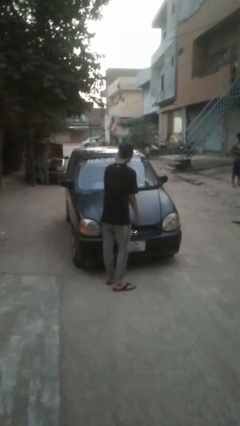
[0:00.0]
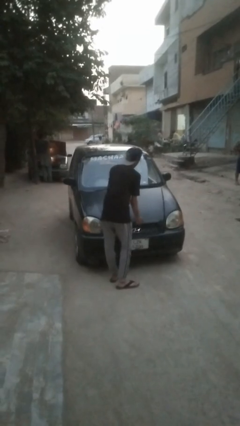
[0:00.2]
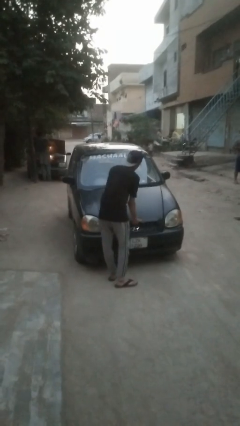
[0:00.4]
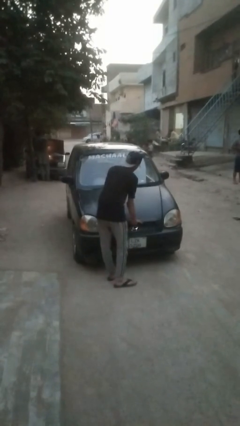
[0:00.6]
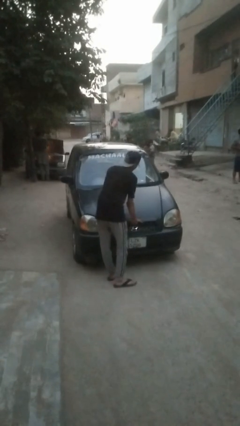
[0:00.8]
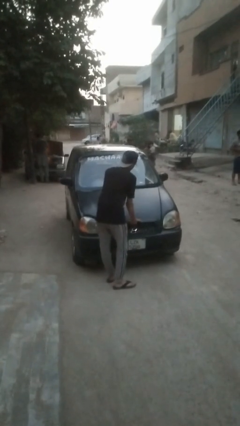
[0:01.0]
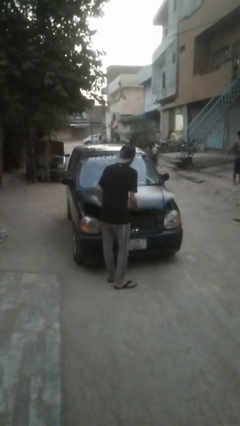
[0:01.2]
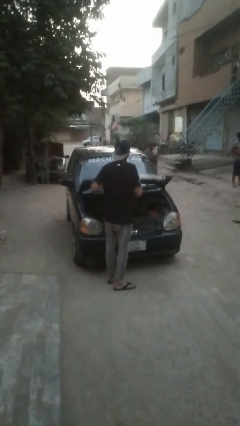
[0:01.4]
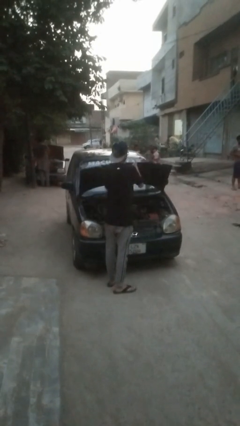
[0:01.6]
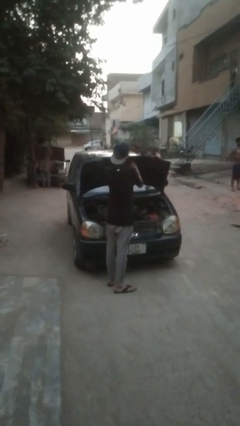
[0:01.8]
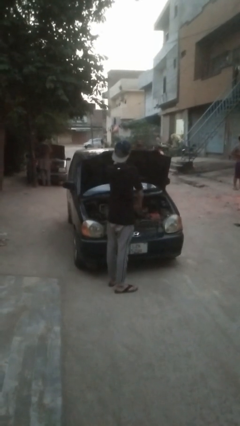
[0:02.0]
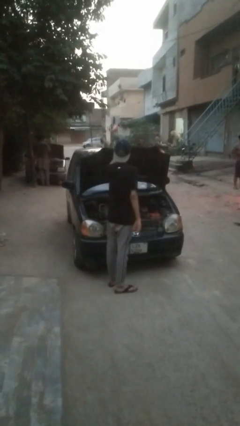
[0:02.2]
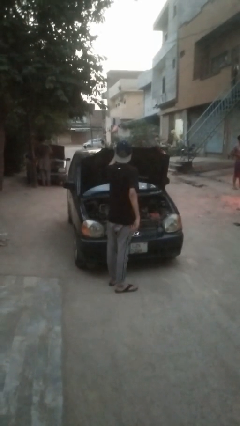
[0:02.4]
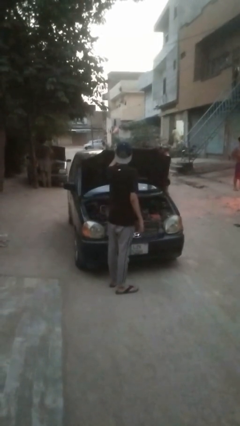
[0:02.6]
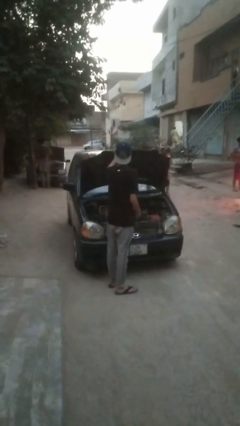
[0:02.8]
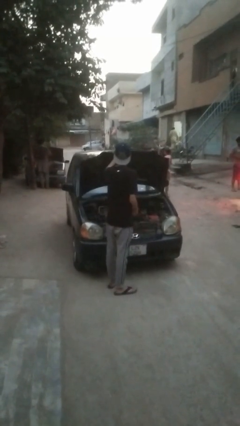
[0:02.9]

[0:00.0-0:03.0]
person opens car hood

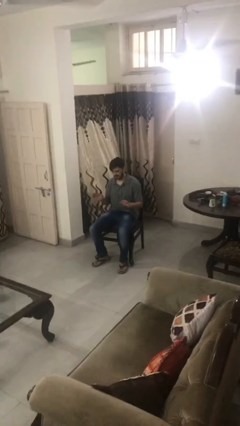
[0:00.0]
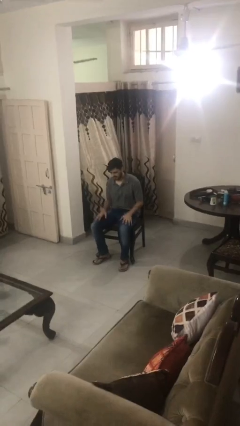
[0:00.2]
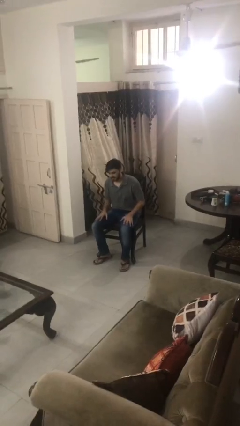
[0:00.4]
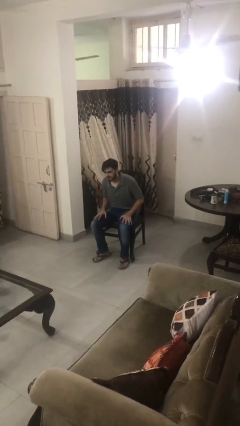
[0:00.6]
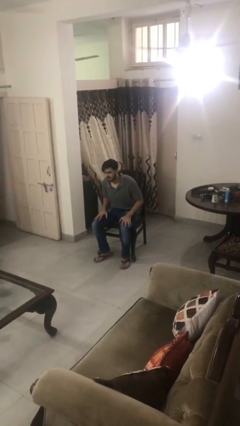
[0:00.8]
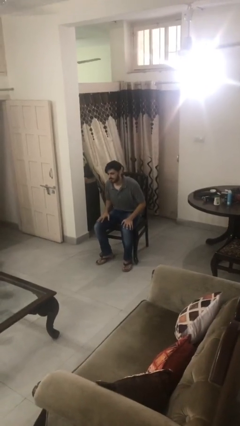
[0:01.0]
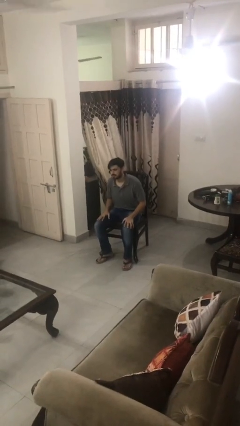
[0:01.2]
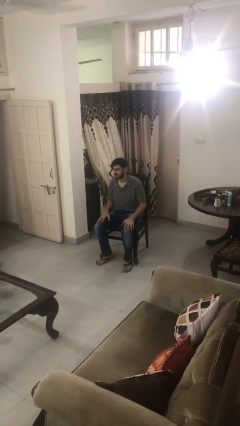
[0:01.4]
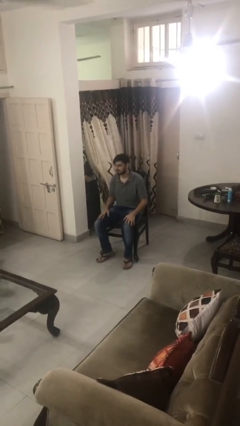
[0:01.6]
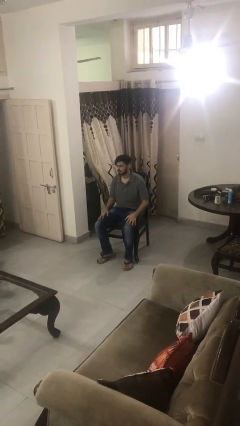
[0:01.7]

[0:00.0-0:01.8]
person slaps hands on thighs

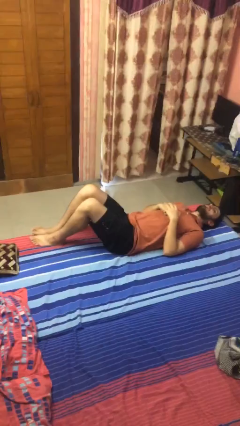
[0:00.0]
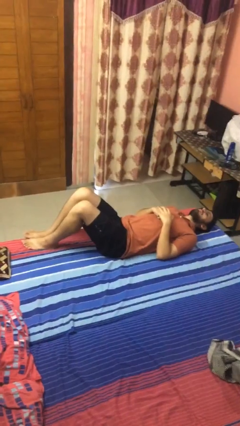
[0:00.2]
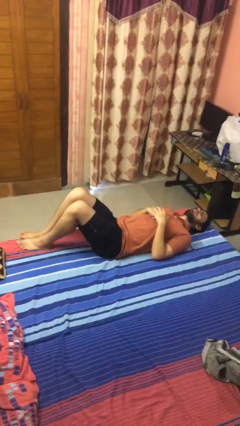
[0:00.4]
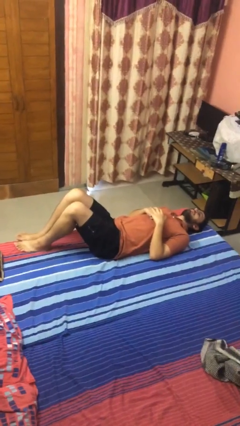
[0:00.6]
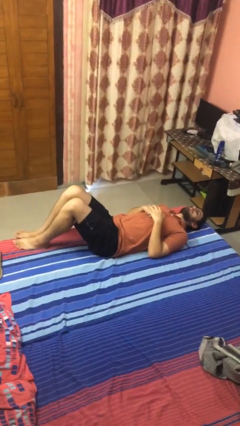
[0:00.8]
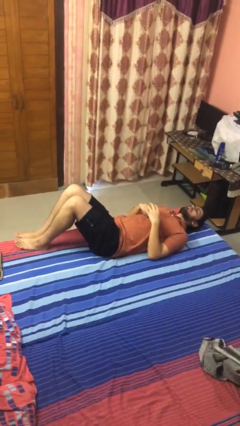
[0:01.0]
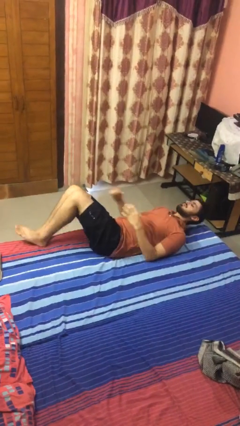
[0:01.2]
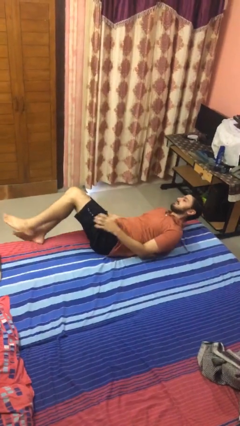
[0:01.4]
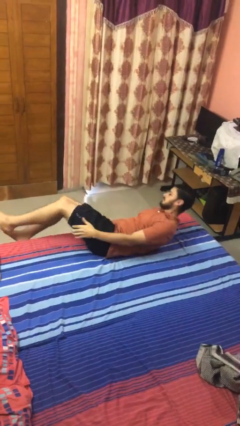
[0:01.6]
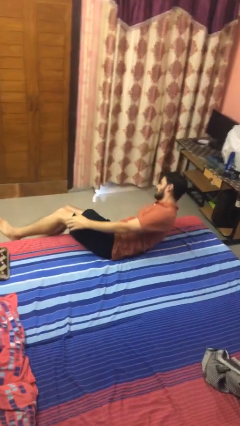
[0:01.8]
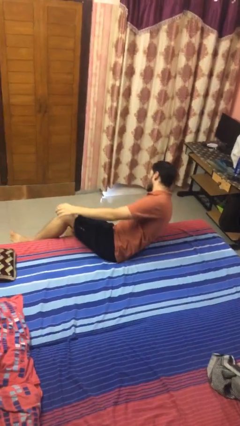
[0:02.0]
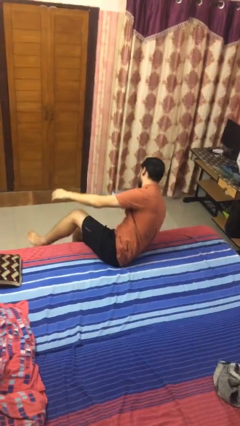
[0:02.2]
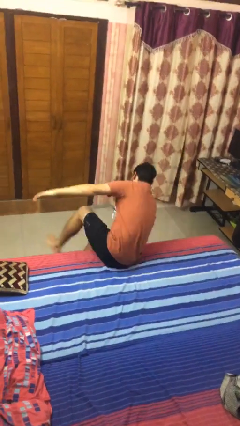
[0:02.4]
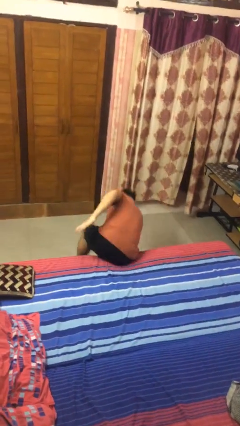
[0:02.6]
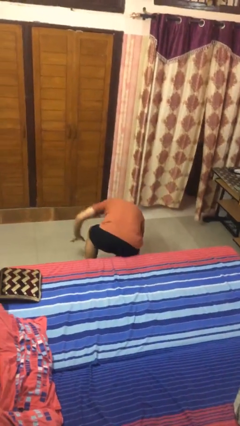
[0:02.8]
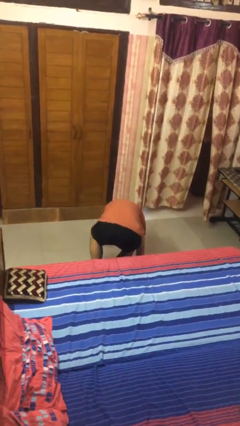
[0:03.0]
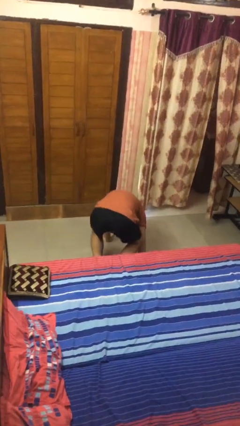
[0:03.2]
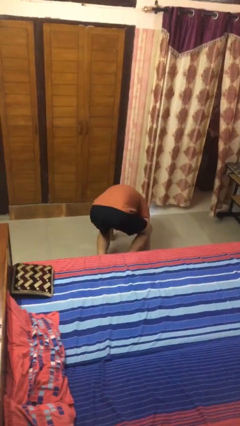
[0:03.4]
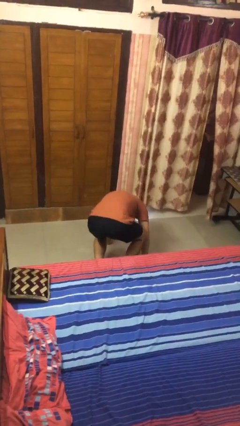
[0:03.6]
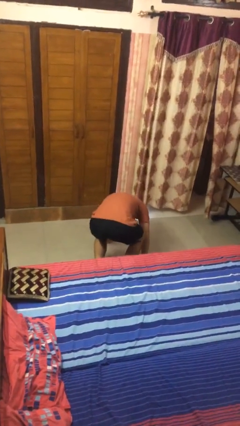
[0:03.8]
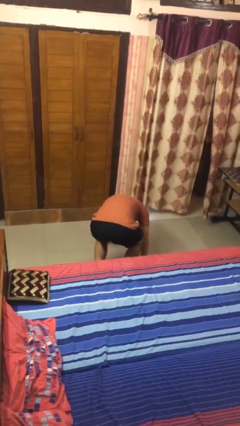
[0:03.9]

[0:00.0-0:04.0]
person falls from bed

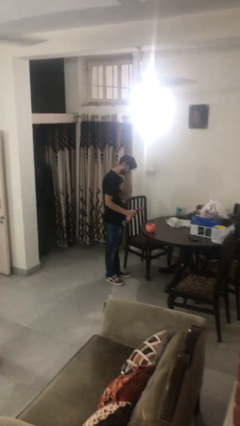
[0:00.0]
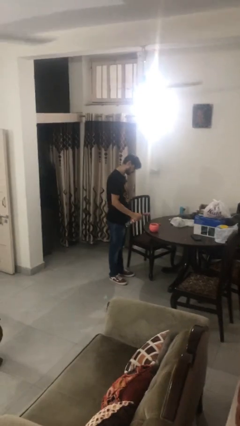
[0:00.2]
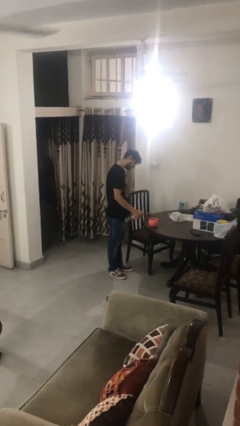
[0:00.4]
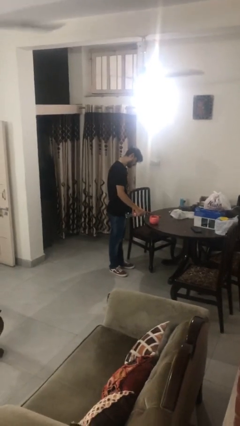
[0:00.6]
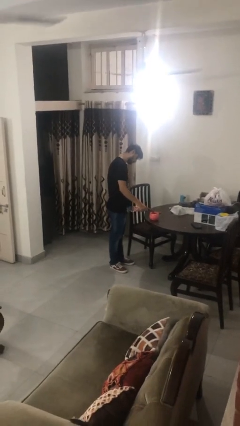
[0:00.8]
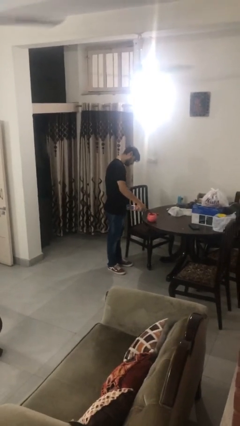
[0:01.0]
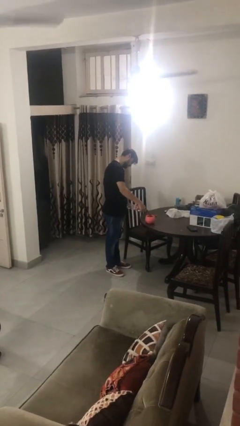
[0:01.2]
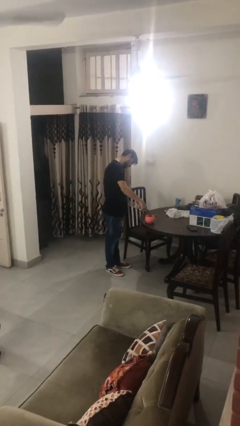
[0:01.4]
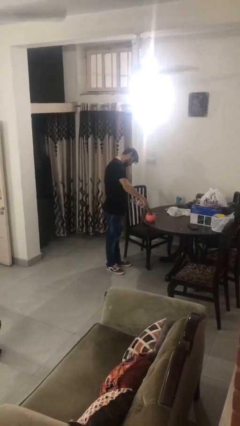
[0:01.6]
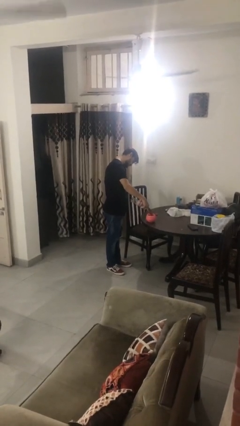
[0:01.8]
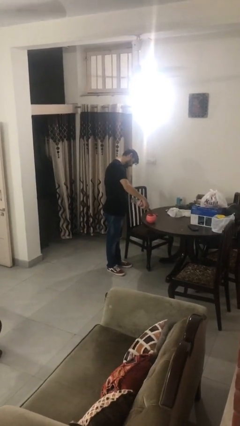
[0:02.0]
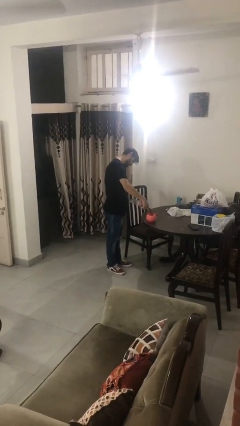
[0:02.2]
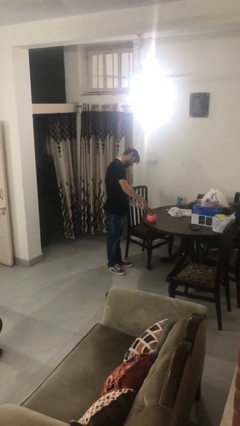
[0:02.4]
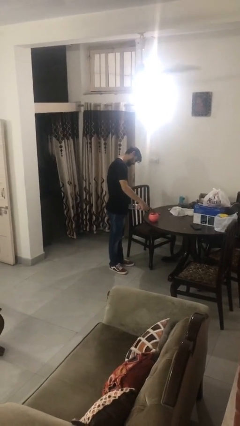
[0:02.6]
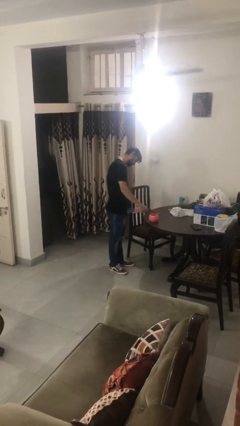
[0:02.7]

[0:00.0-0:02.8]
person waters houseplant

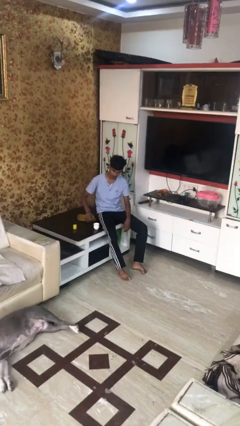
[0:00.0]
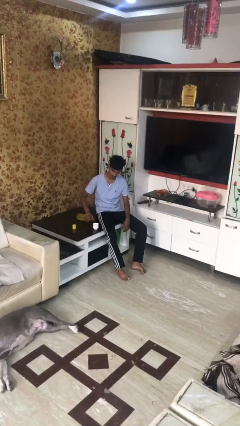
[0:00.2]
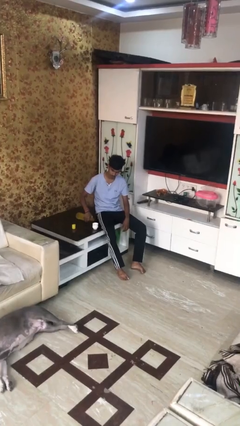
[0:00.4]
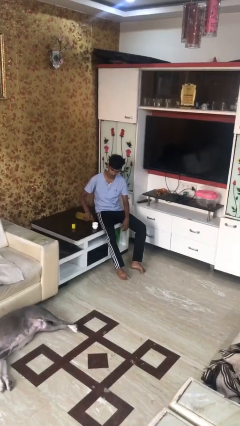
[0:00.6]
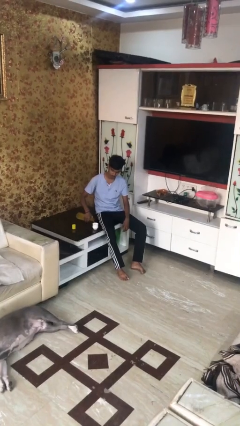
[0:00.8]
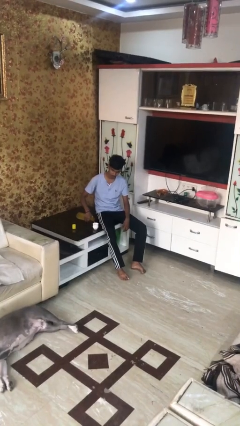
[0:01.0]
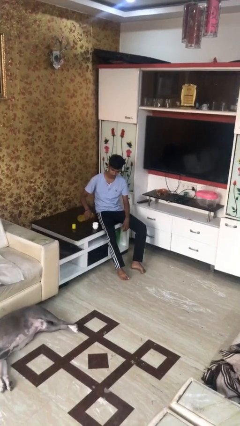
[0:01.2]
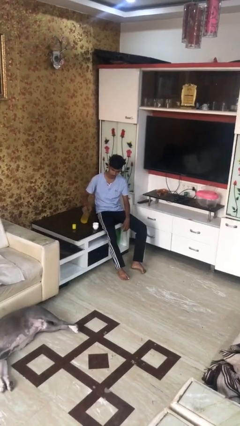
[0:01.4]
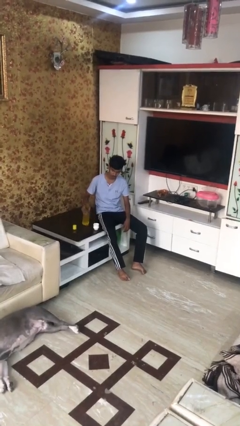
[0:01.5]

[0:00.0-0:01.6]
person pours liquid into cup

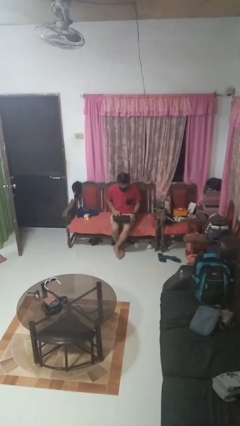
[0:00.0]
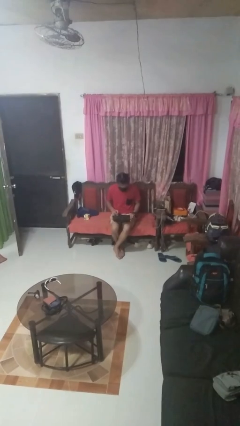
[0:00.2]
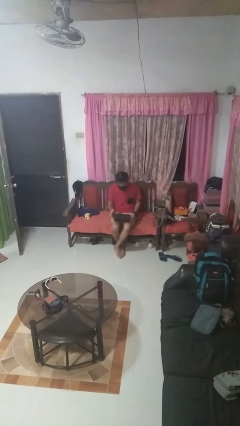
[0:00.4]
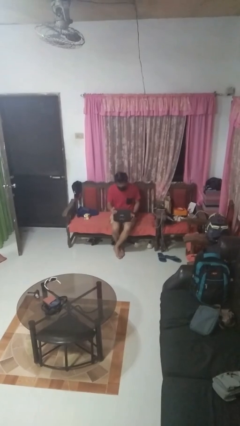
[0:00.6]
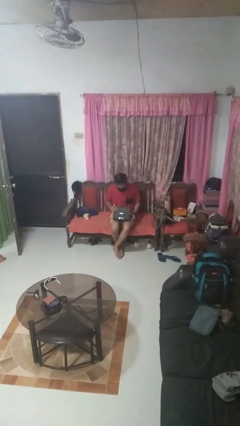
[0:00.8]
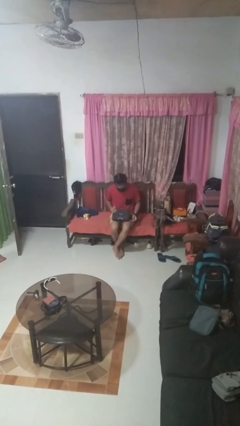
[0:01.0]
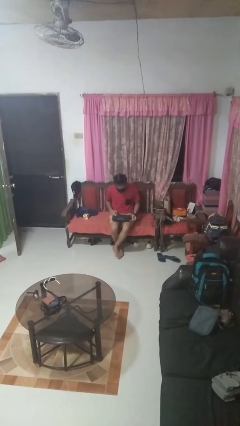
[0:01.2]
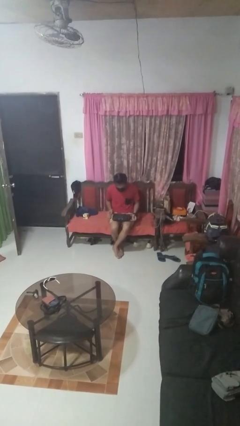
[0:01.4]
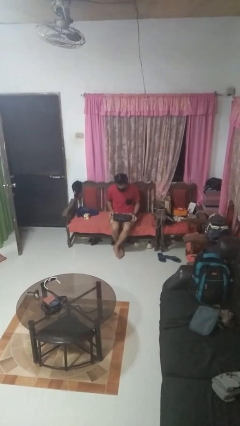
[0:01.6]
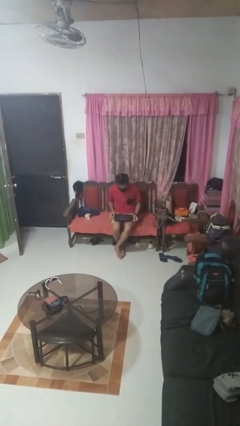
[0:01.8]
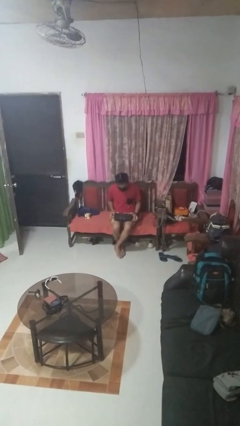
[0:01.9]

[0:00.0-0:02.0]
person closes laptop

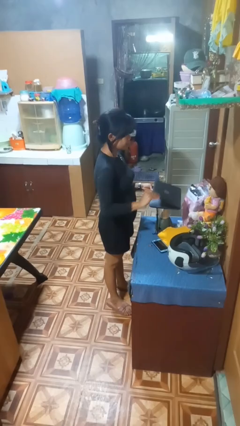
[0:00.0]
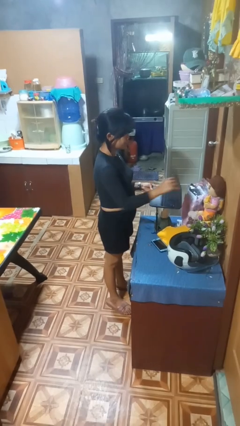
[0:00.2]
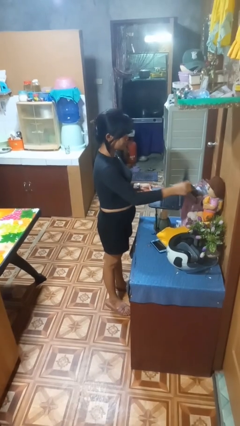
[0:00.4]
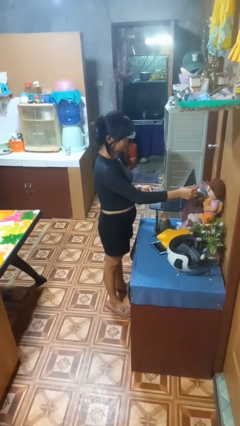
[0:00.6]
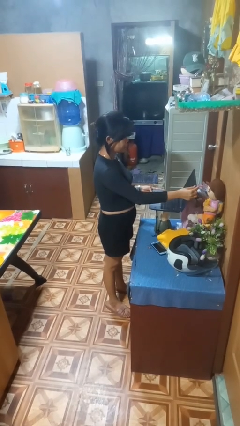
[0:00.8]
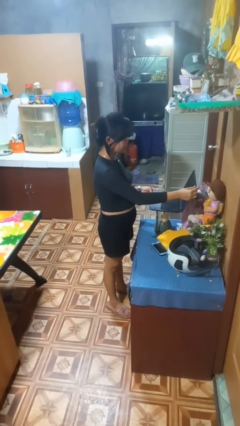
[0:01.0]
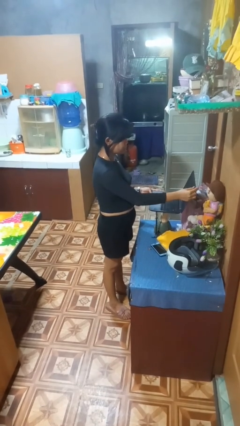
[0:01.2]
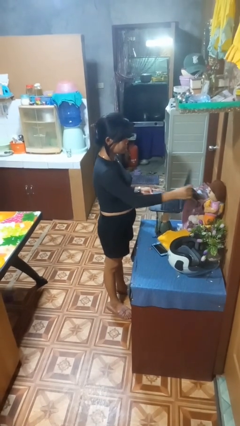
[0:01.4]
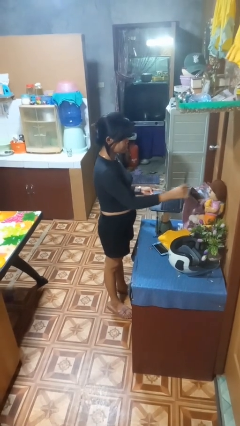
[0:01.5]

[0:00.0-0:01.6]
person opens laptop

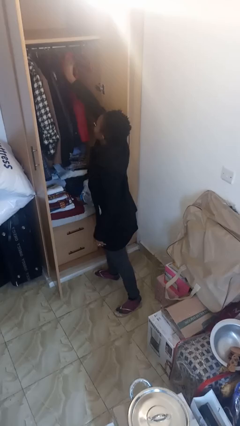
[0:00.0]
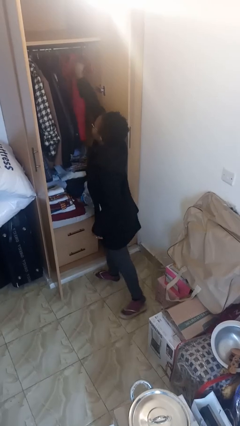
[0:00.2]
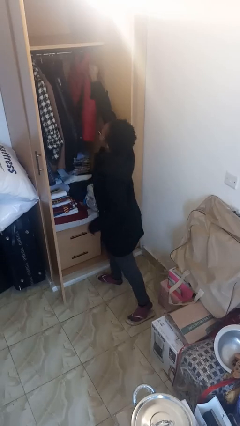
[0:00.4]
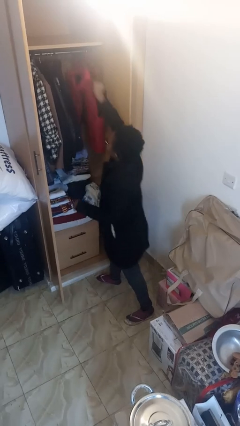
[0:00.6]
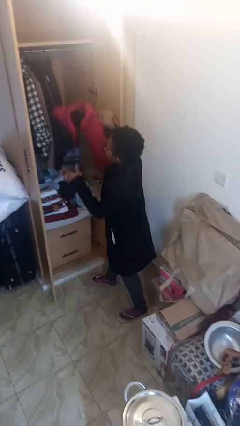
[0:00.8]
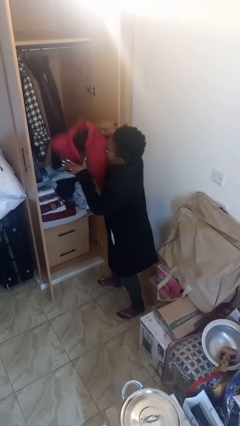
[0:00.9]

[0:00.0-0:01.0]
person takes clothes from closet
